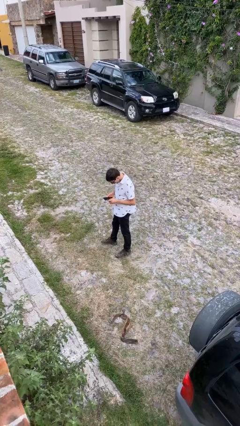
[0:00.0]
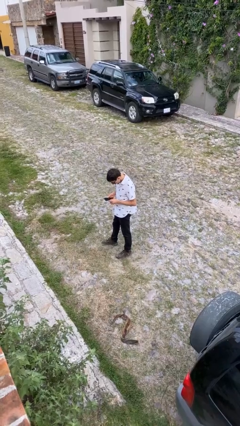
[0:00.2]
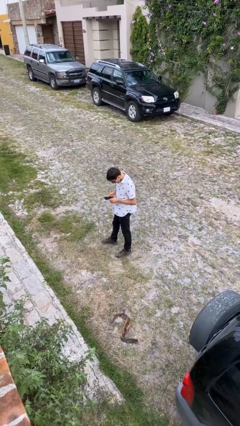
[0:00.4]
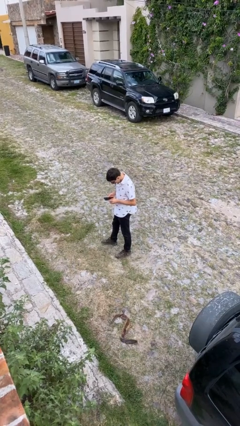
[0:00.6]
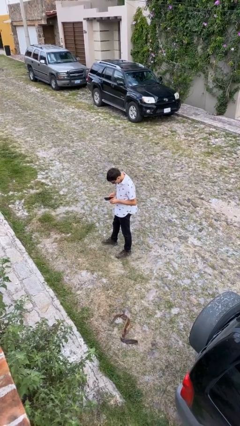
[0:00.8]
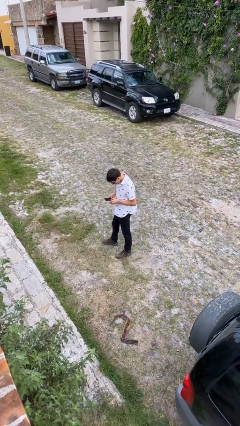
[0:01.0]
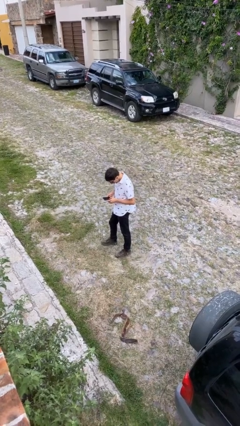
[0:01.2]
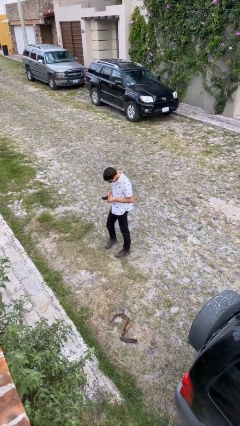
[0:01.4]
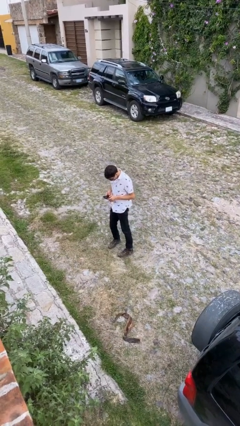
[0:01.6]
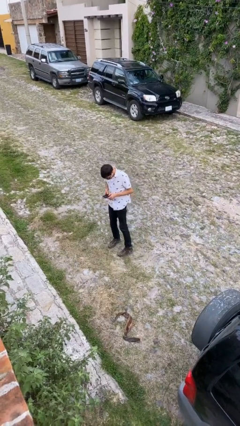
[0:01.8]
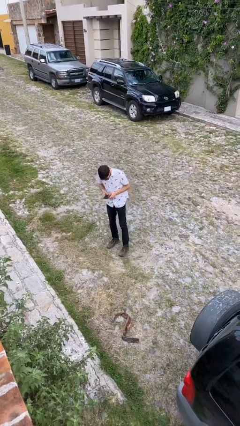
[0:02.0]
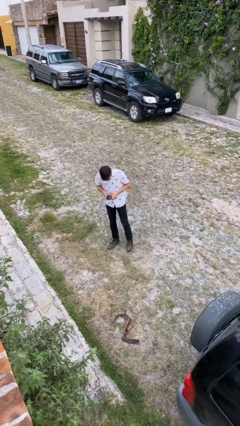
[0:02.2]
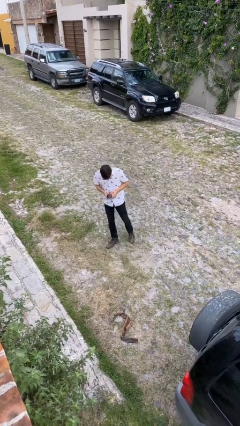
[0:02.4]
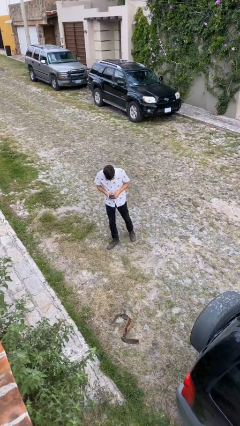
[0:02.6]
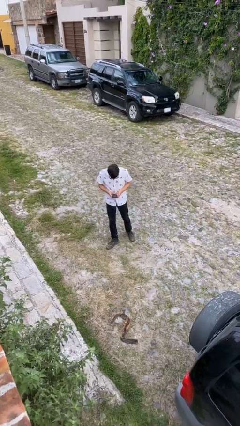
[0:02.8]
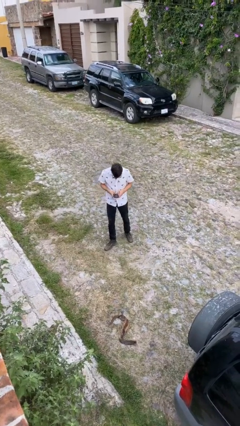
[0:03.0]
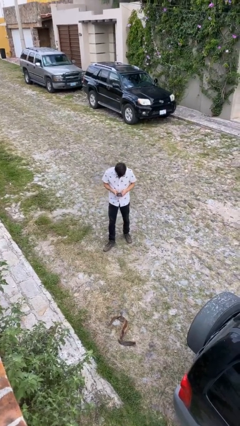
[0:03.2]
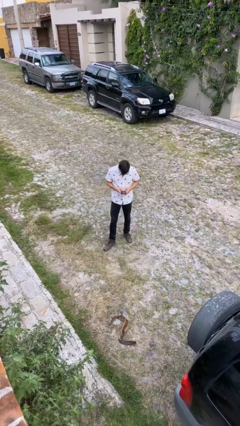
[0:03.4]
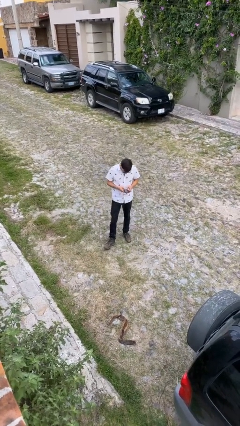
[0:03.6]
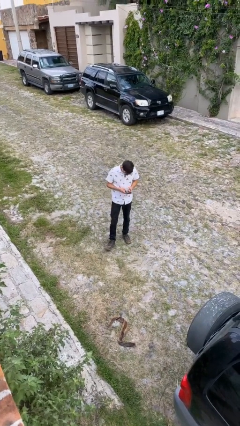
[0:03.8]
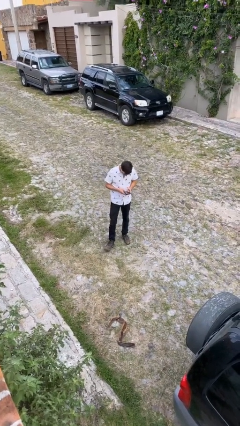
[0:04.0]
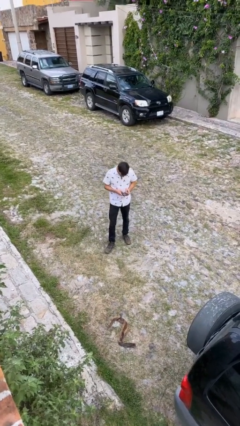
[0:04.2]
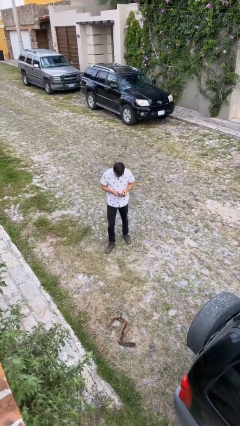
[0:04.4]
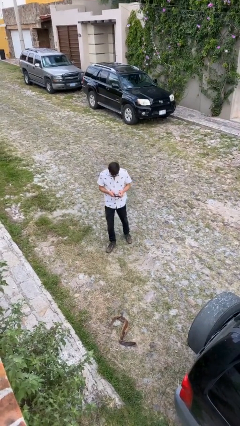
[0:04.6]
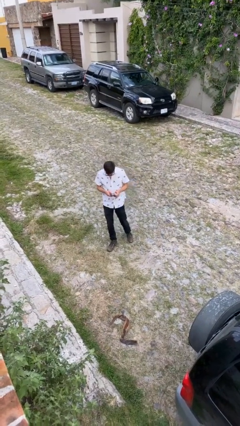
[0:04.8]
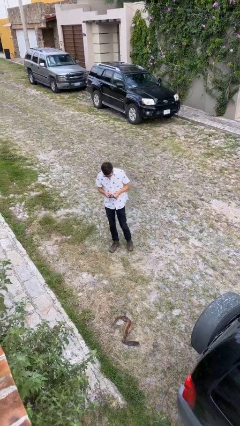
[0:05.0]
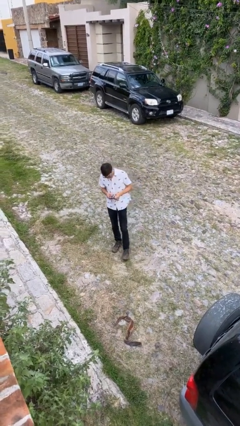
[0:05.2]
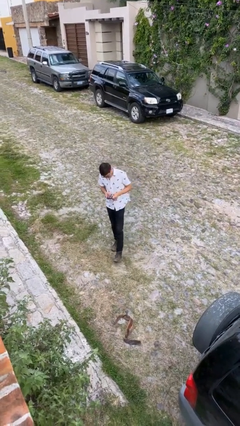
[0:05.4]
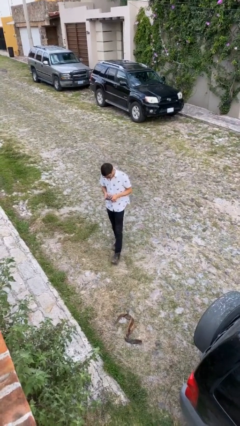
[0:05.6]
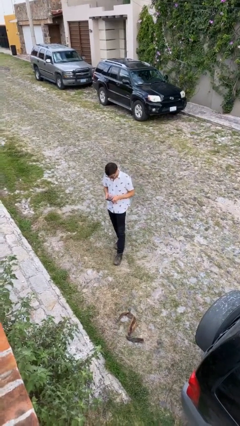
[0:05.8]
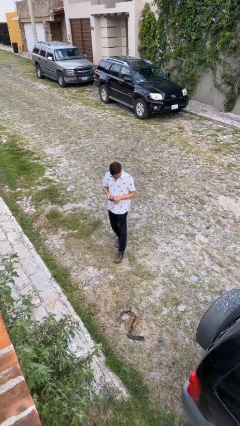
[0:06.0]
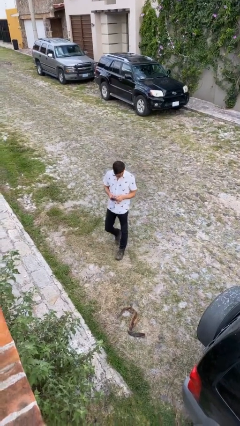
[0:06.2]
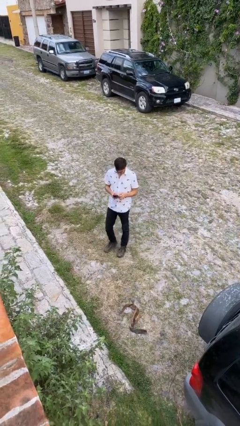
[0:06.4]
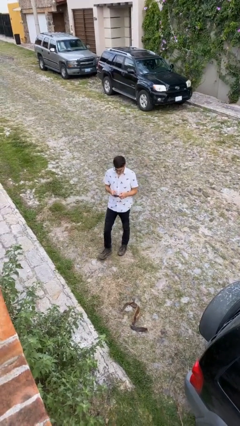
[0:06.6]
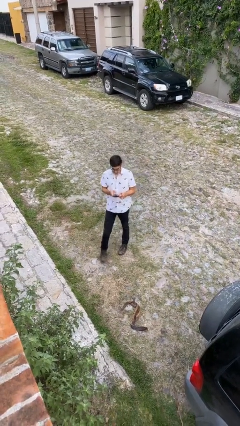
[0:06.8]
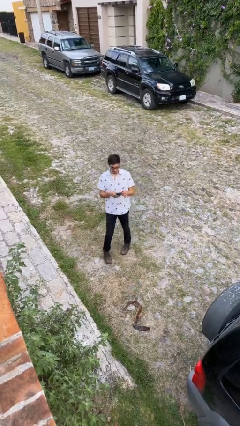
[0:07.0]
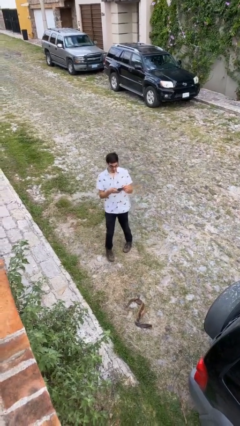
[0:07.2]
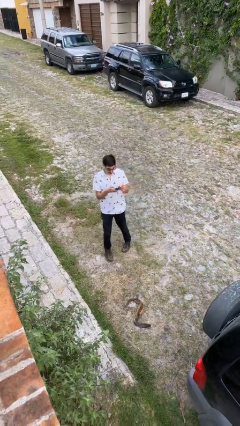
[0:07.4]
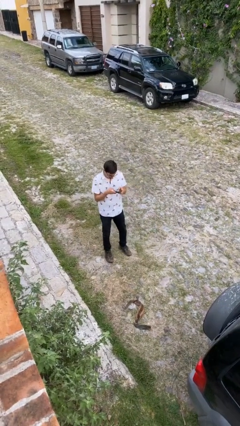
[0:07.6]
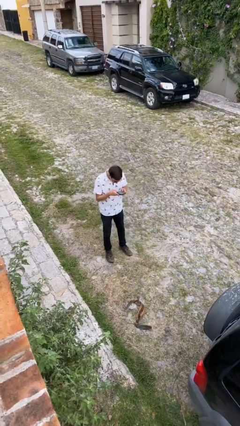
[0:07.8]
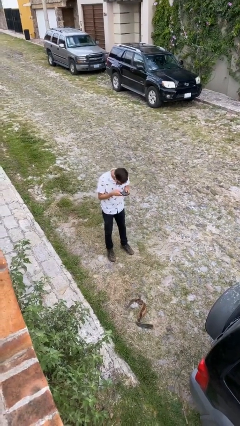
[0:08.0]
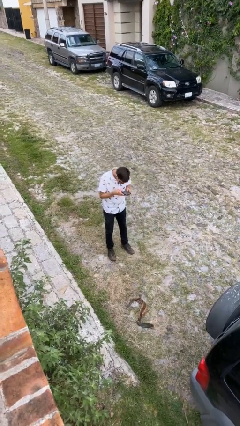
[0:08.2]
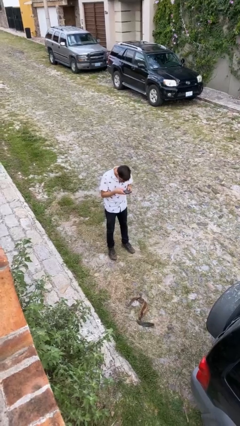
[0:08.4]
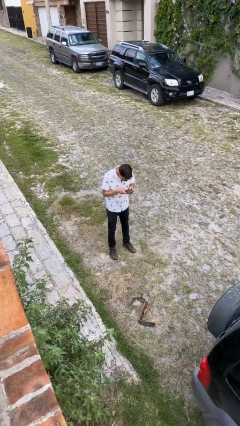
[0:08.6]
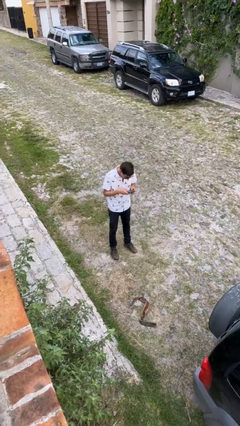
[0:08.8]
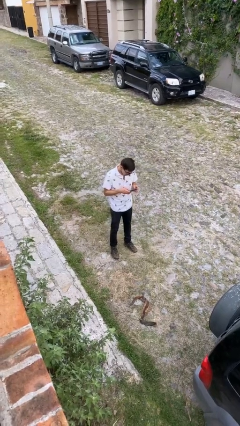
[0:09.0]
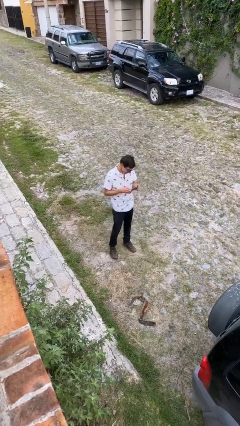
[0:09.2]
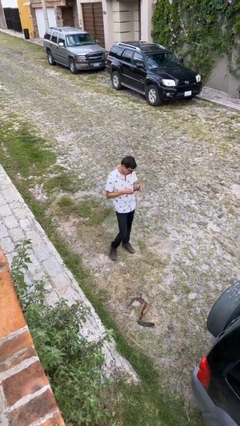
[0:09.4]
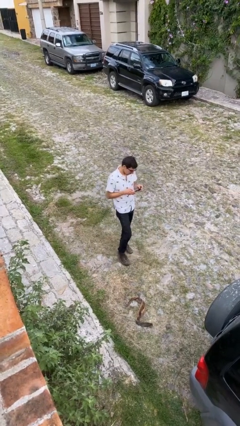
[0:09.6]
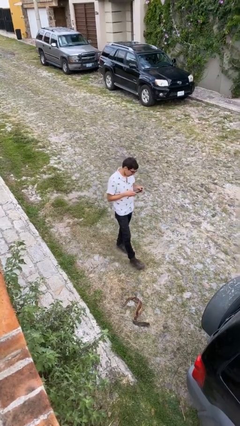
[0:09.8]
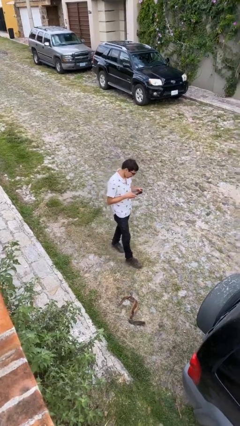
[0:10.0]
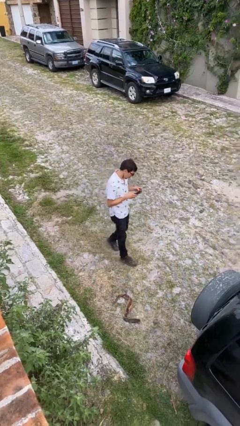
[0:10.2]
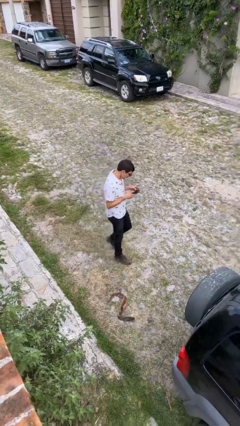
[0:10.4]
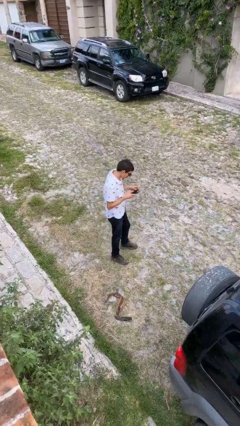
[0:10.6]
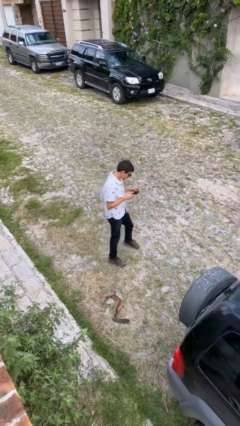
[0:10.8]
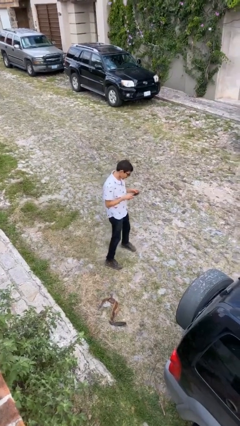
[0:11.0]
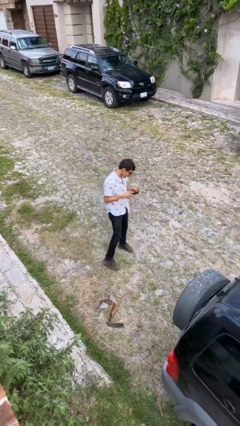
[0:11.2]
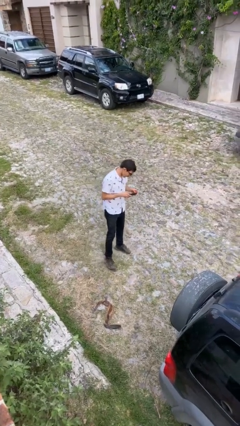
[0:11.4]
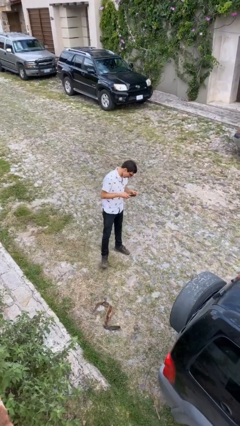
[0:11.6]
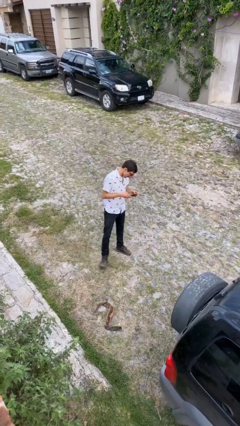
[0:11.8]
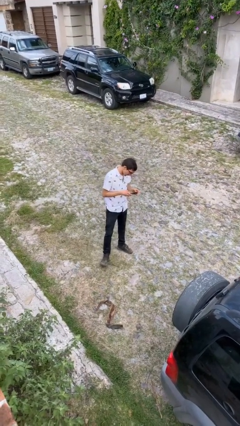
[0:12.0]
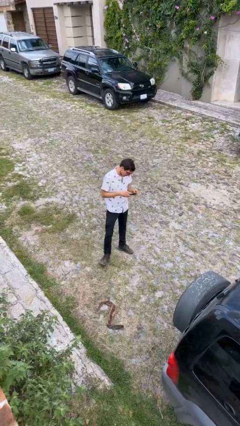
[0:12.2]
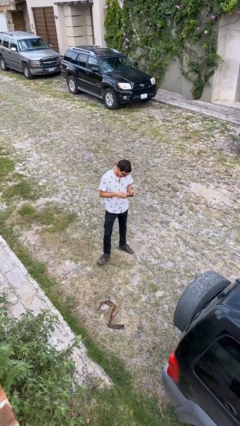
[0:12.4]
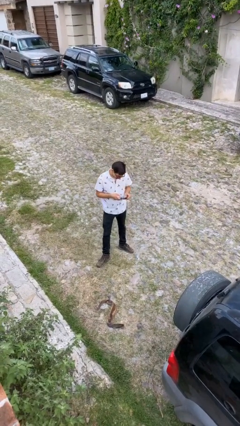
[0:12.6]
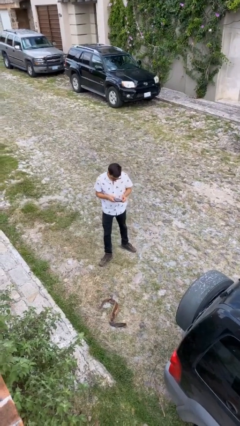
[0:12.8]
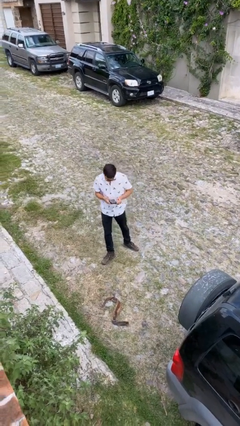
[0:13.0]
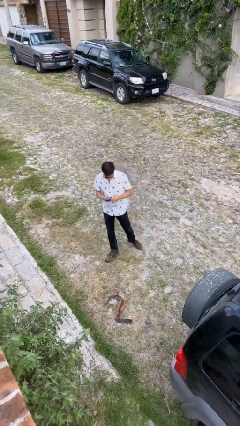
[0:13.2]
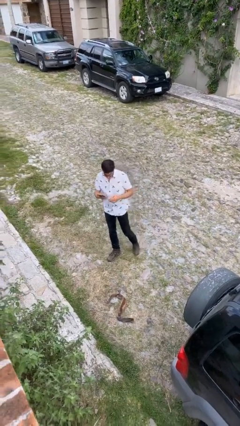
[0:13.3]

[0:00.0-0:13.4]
person texts on phone

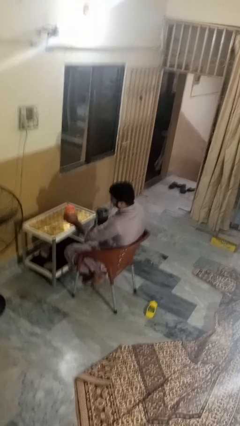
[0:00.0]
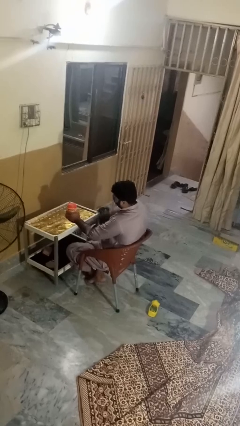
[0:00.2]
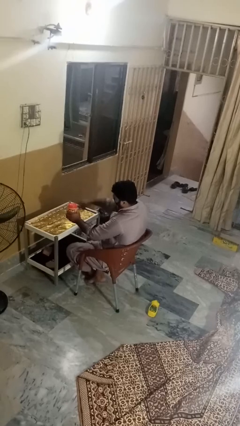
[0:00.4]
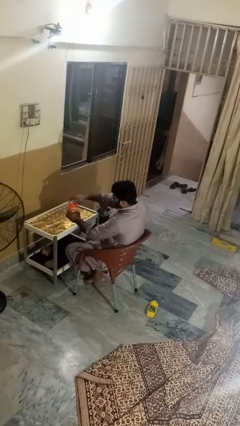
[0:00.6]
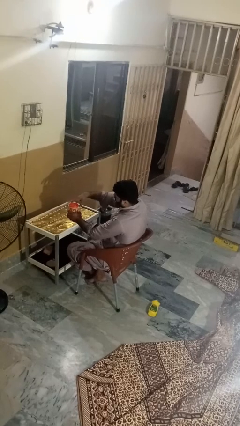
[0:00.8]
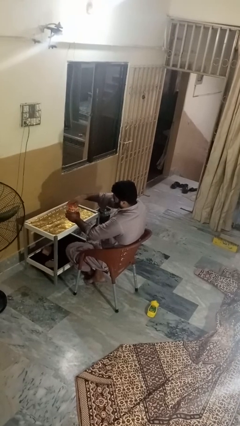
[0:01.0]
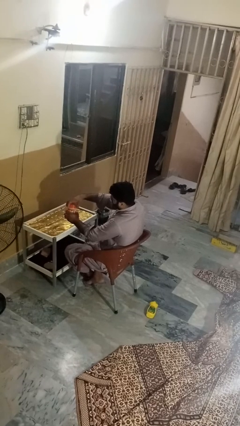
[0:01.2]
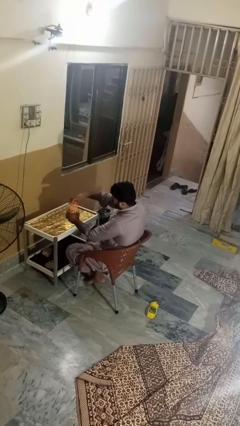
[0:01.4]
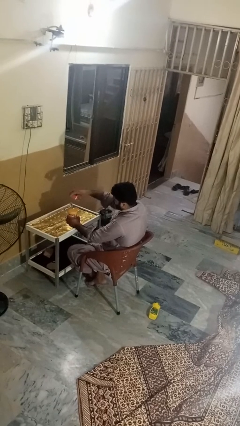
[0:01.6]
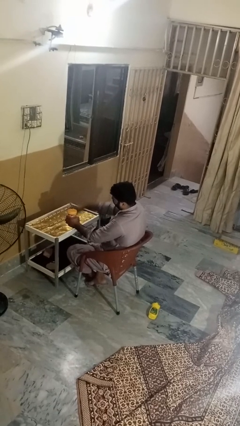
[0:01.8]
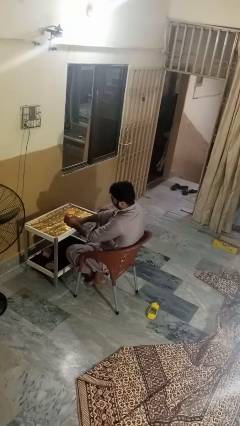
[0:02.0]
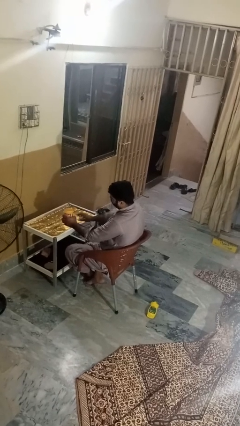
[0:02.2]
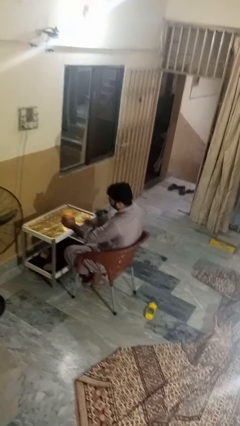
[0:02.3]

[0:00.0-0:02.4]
person opens jar

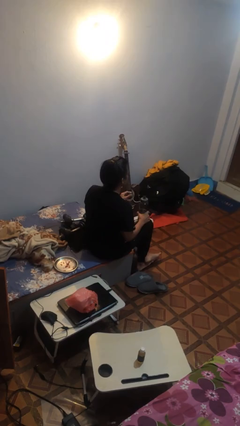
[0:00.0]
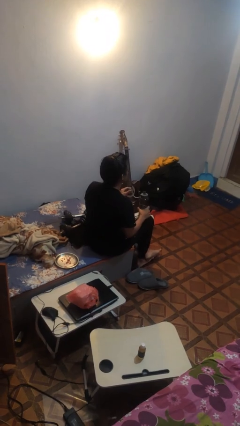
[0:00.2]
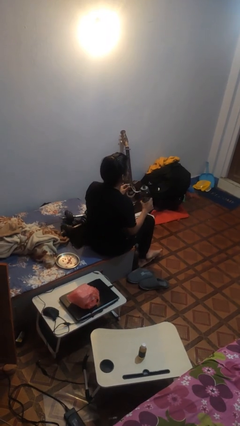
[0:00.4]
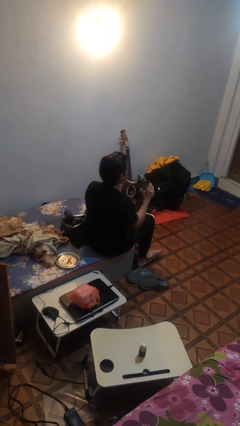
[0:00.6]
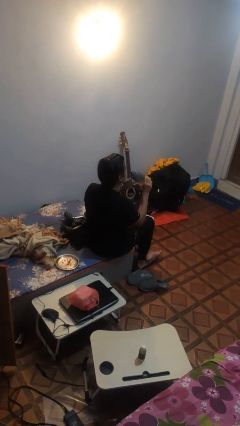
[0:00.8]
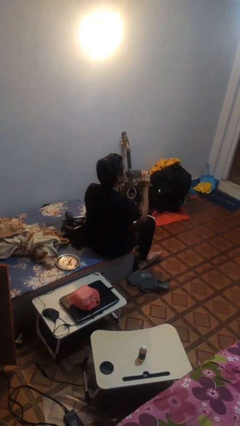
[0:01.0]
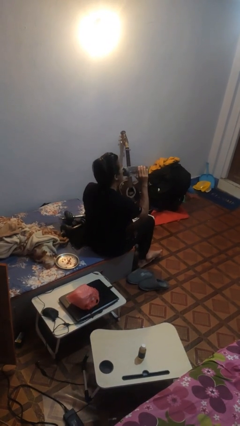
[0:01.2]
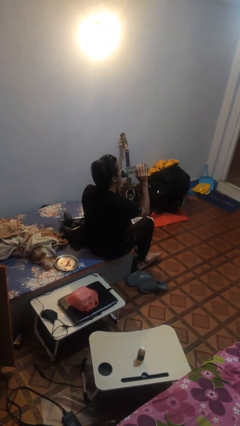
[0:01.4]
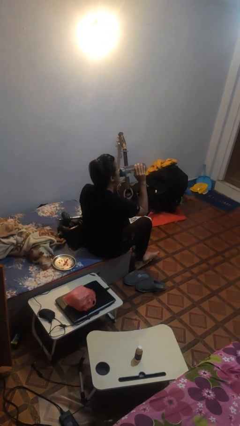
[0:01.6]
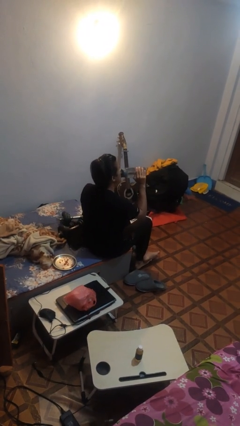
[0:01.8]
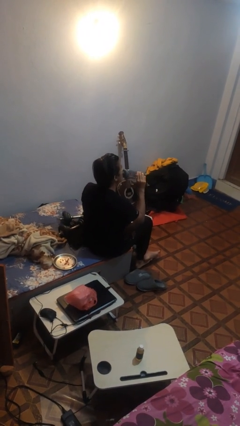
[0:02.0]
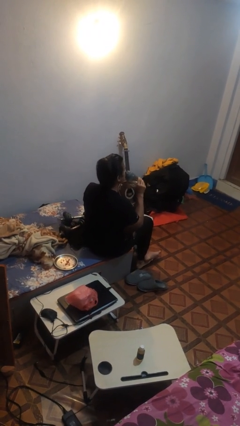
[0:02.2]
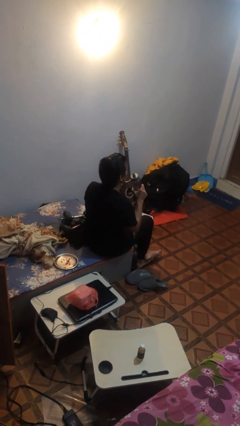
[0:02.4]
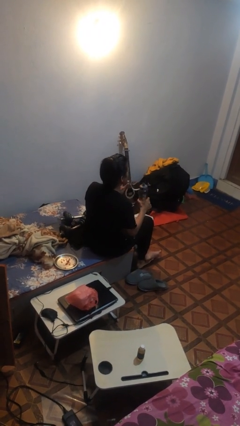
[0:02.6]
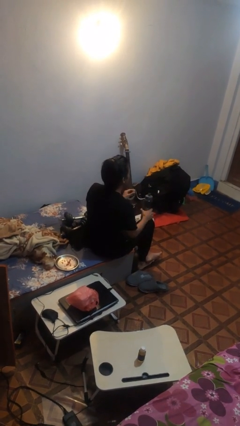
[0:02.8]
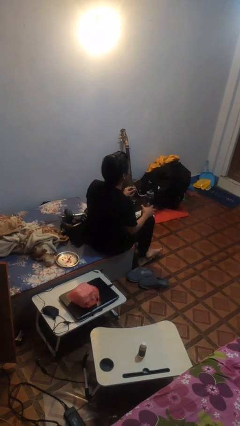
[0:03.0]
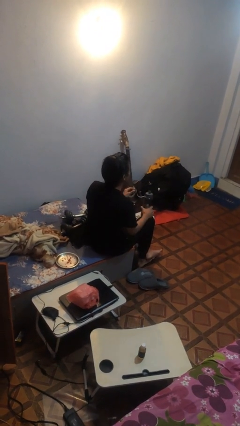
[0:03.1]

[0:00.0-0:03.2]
person drinks from bottle
